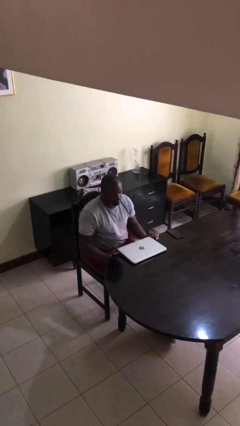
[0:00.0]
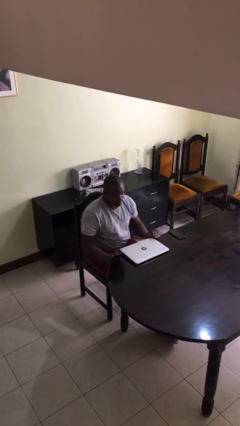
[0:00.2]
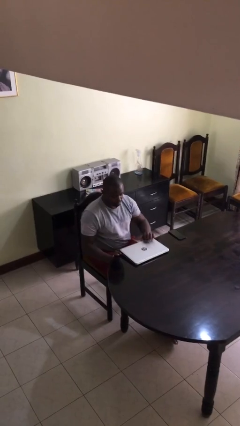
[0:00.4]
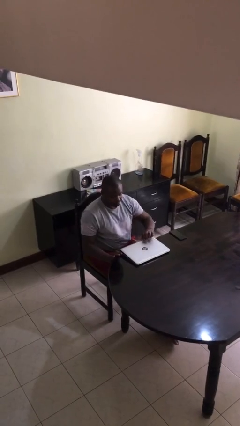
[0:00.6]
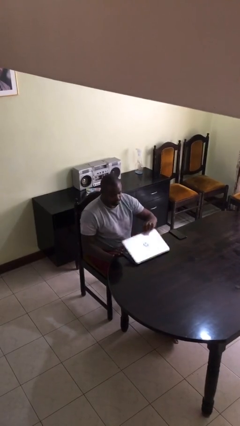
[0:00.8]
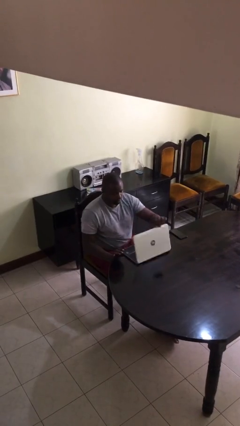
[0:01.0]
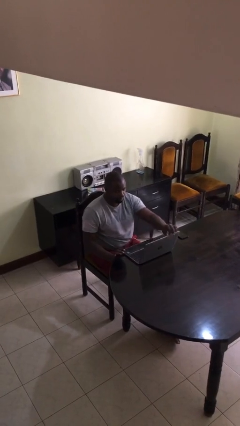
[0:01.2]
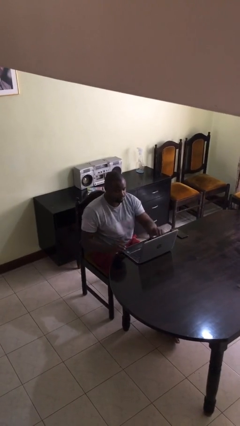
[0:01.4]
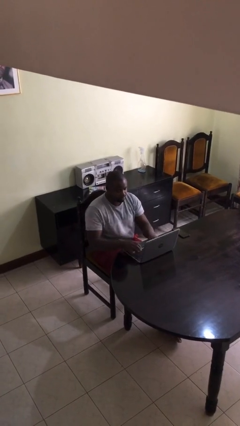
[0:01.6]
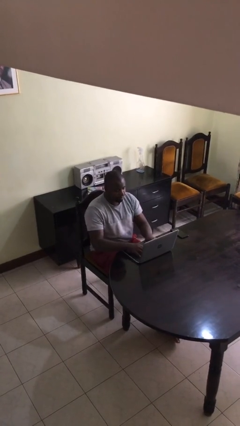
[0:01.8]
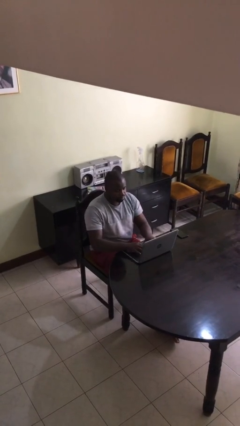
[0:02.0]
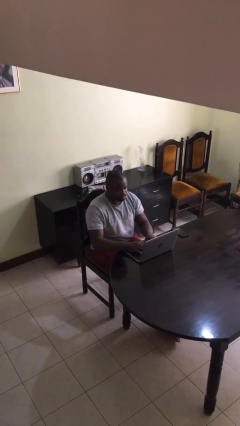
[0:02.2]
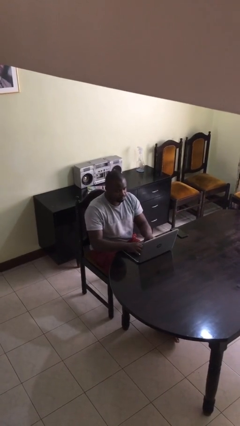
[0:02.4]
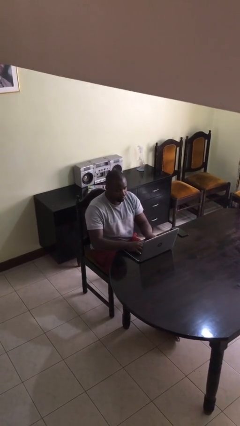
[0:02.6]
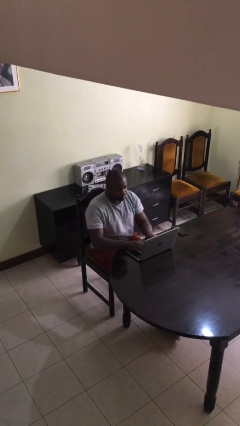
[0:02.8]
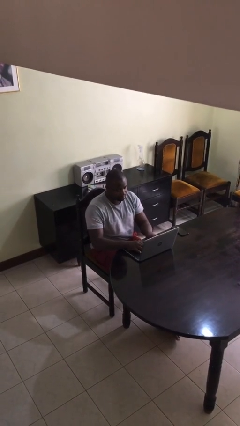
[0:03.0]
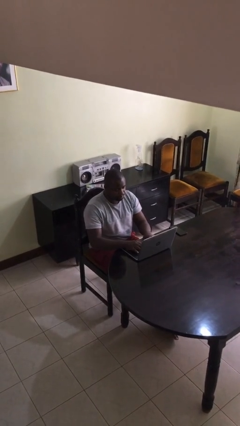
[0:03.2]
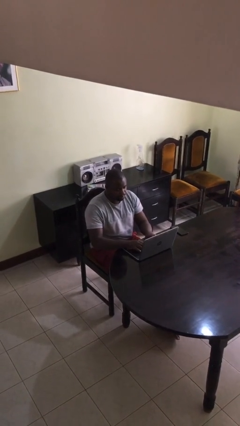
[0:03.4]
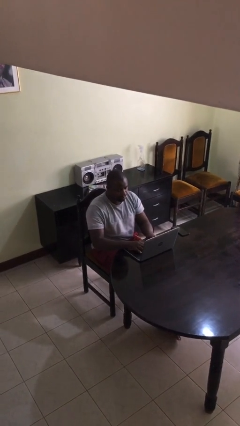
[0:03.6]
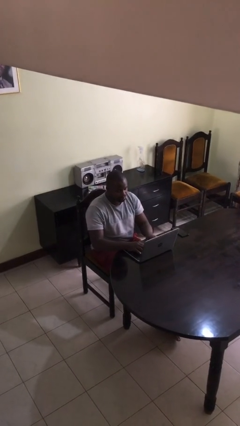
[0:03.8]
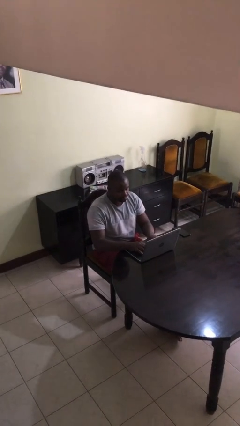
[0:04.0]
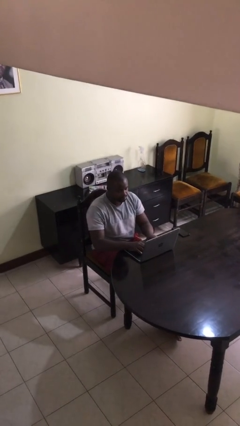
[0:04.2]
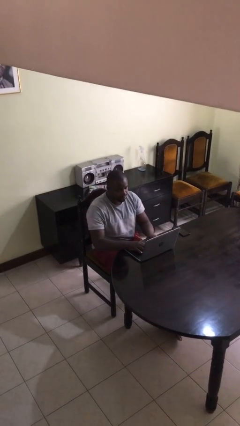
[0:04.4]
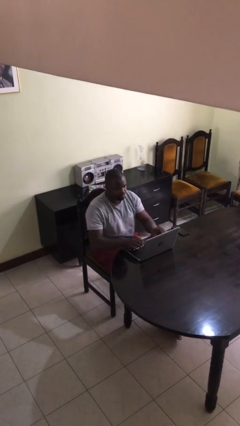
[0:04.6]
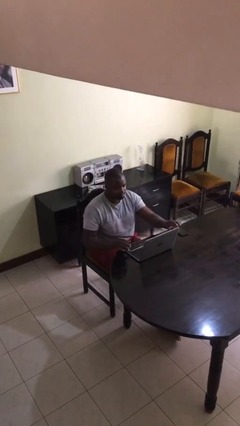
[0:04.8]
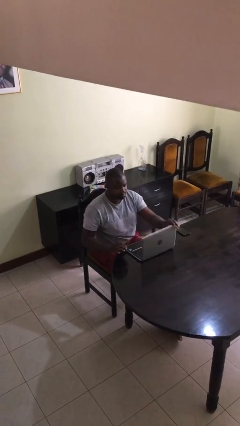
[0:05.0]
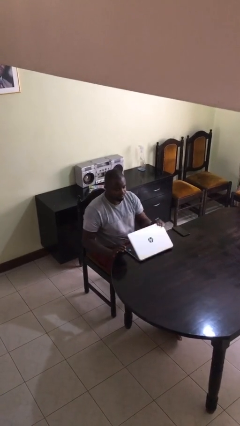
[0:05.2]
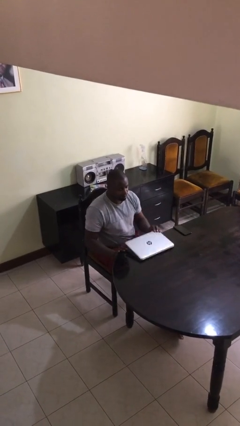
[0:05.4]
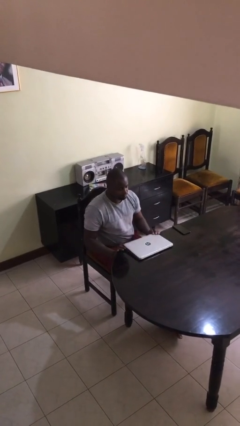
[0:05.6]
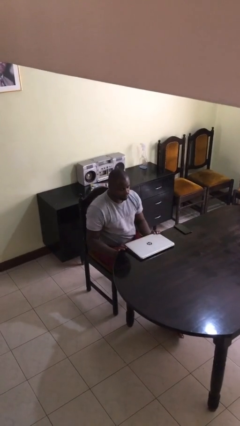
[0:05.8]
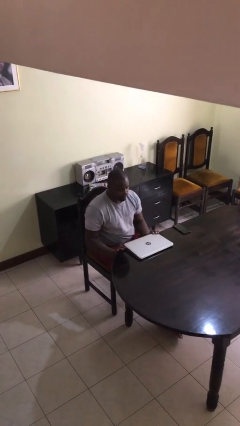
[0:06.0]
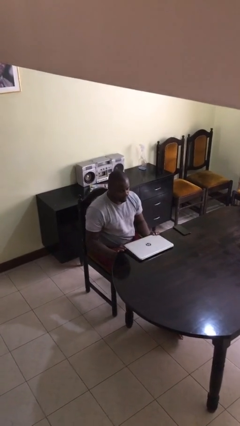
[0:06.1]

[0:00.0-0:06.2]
person interacts with laptop

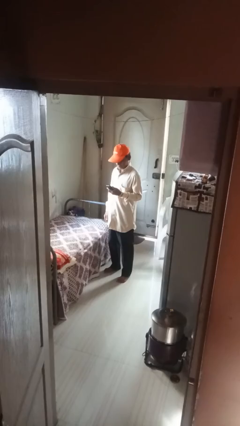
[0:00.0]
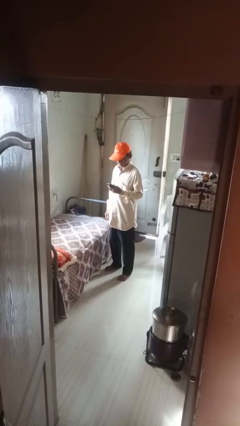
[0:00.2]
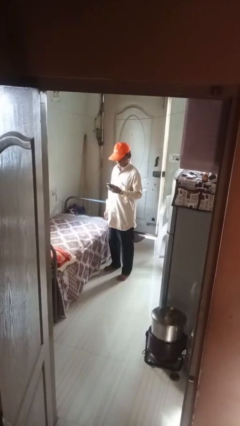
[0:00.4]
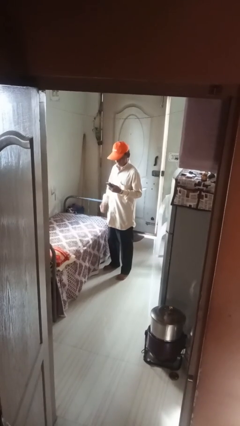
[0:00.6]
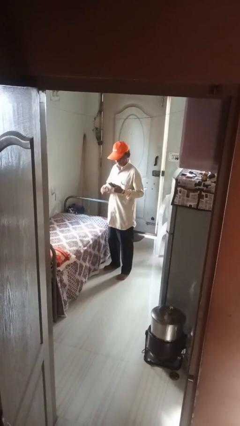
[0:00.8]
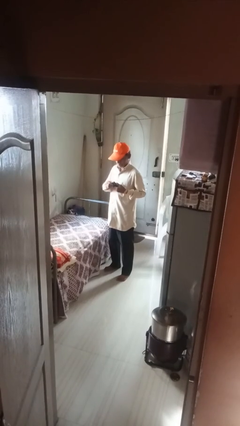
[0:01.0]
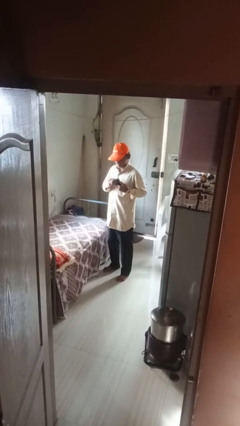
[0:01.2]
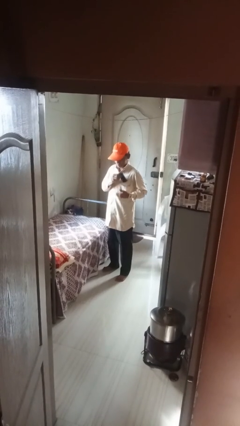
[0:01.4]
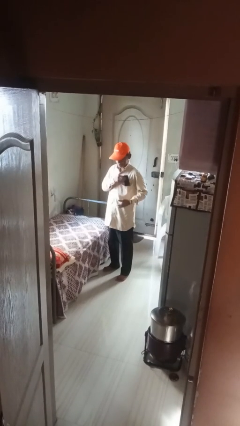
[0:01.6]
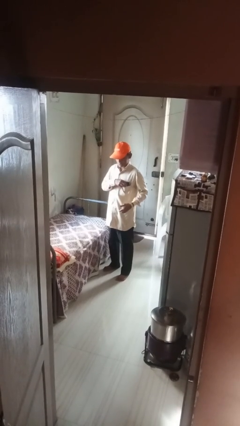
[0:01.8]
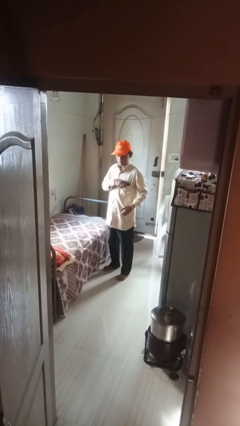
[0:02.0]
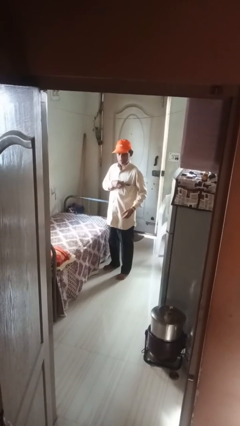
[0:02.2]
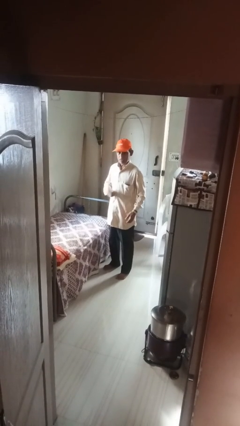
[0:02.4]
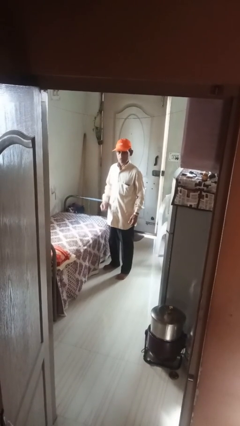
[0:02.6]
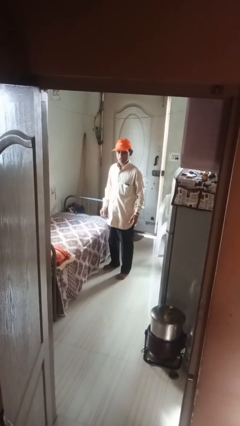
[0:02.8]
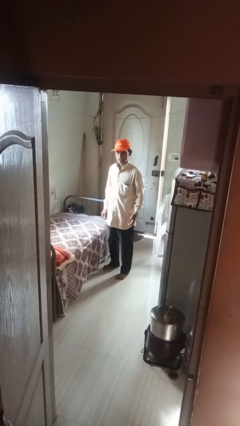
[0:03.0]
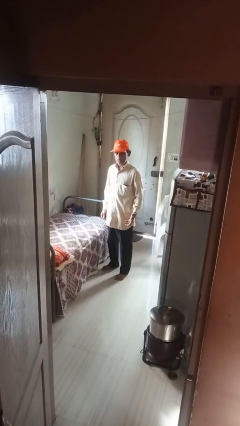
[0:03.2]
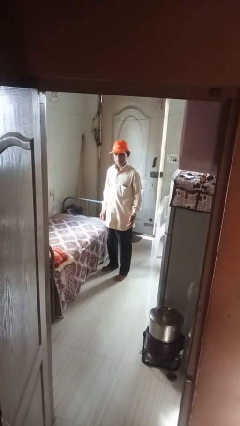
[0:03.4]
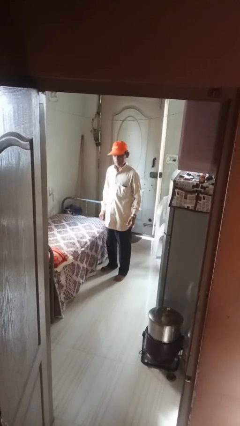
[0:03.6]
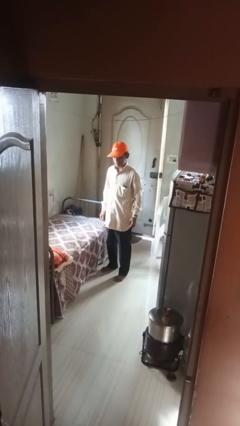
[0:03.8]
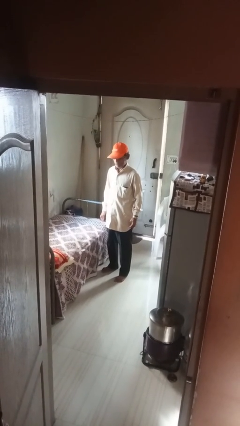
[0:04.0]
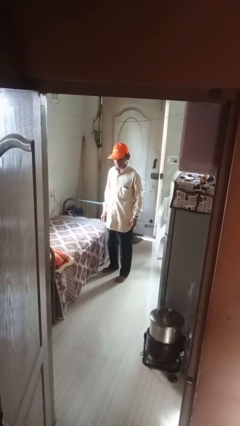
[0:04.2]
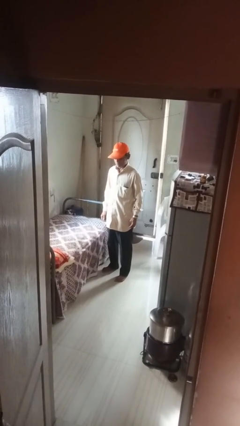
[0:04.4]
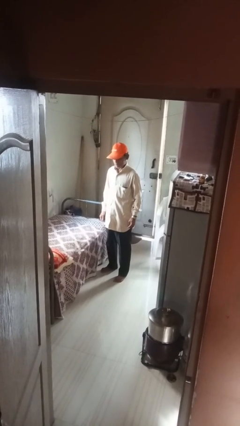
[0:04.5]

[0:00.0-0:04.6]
person puts phone into pocket

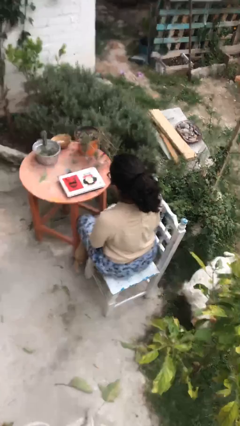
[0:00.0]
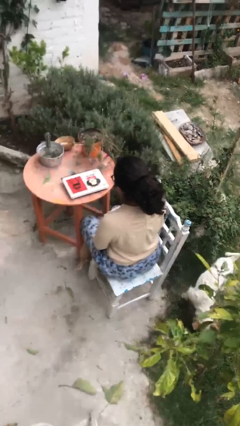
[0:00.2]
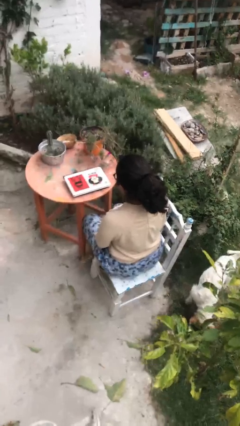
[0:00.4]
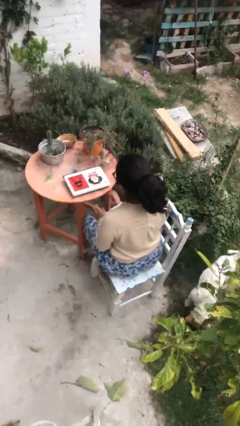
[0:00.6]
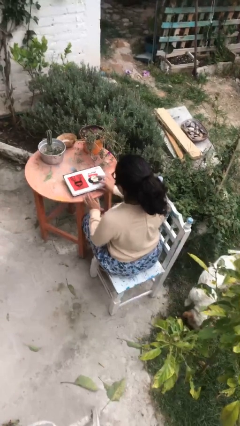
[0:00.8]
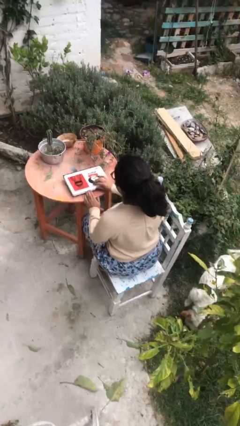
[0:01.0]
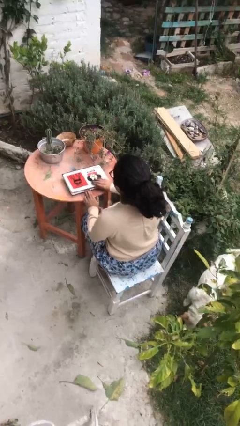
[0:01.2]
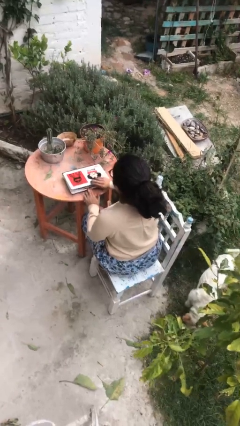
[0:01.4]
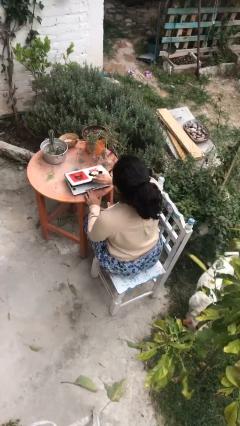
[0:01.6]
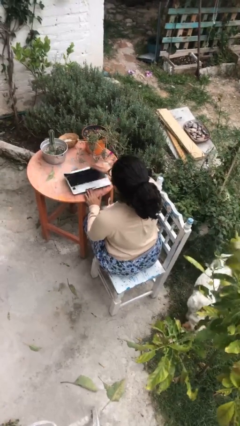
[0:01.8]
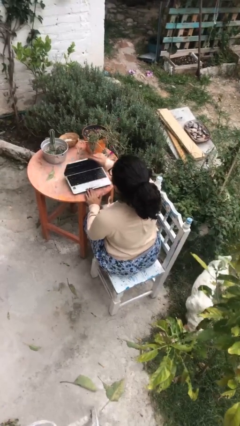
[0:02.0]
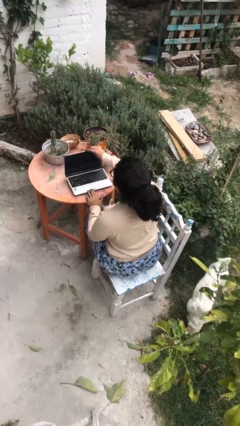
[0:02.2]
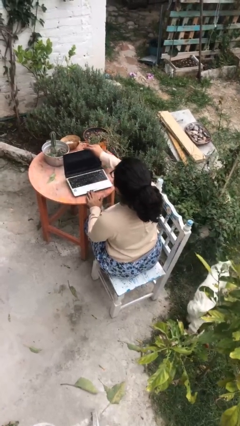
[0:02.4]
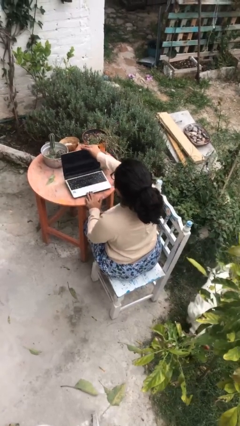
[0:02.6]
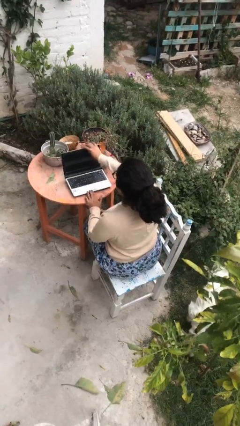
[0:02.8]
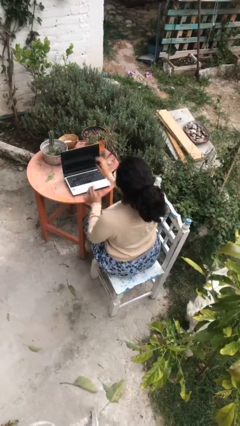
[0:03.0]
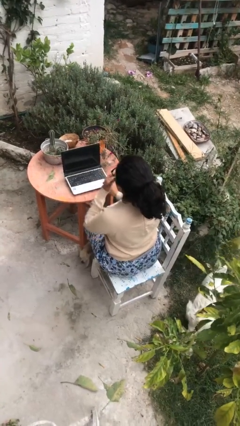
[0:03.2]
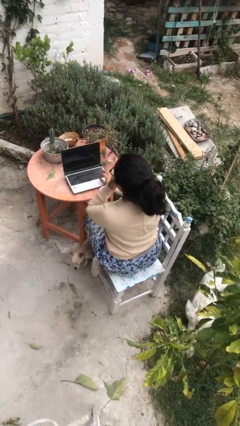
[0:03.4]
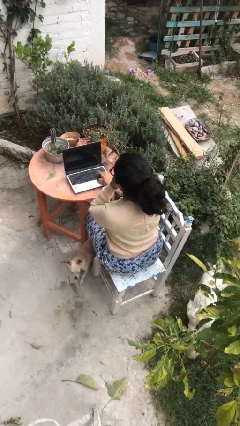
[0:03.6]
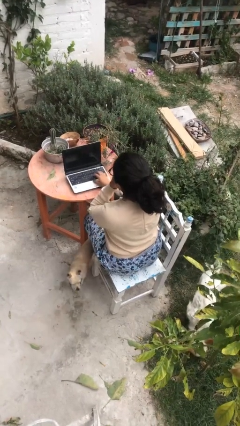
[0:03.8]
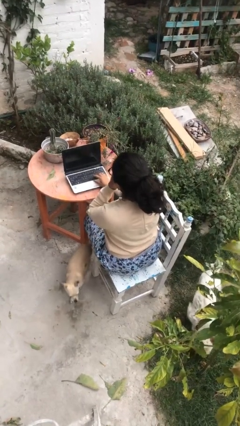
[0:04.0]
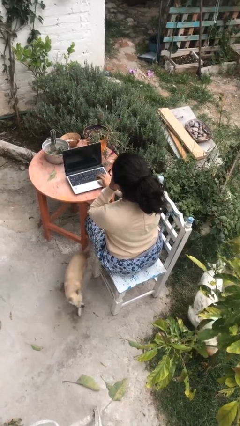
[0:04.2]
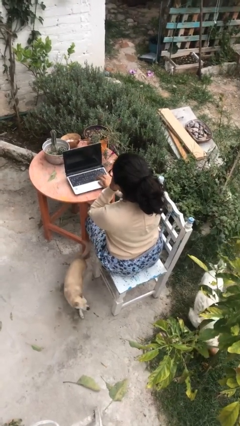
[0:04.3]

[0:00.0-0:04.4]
person opens laptop

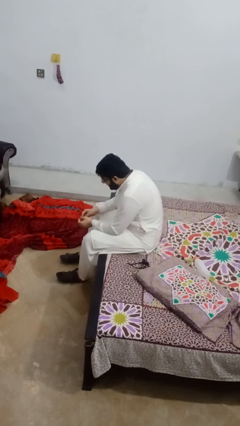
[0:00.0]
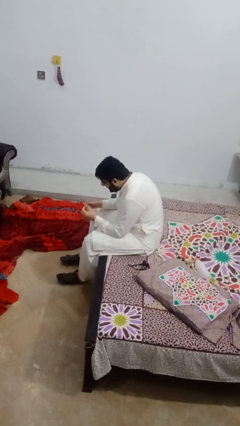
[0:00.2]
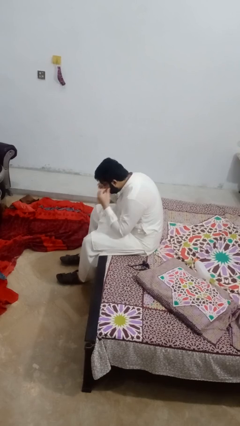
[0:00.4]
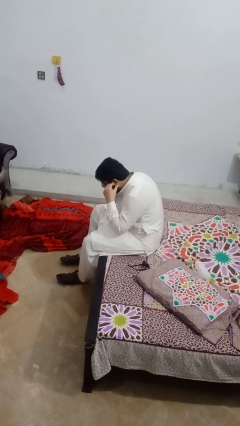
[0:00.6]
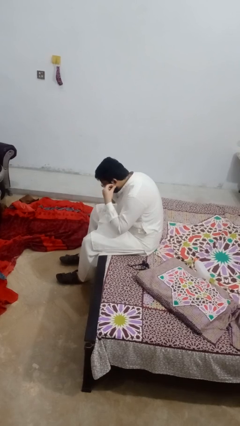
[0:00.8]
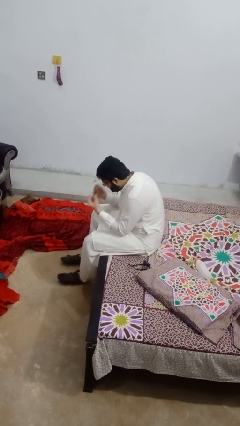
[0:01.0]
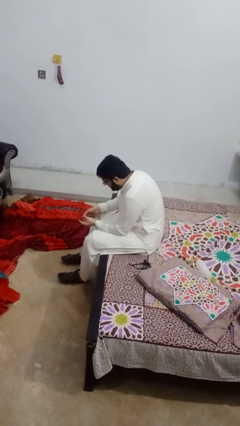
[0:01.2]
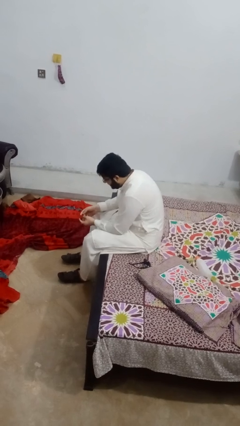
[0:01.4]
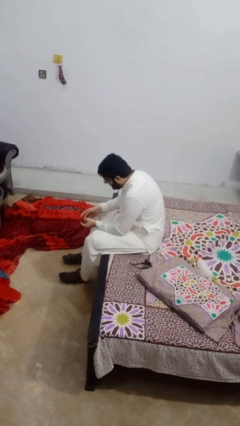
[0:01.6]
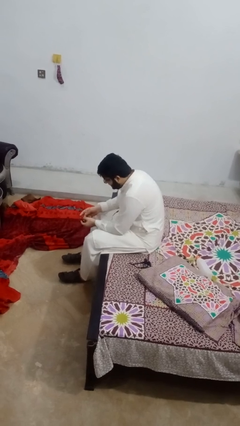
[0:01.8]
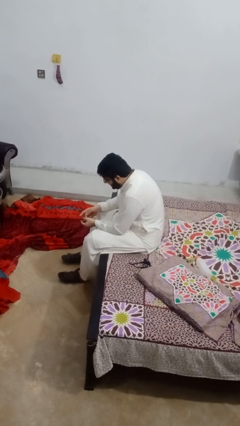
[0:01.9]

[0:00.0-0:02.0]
person takes off headphones

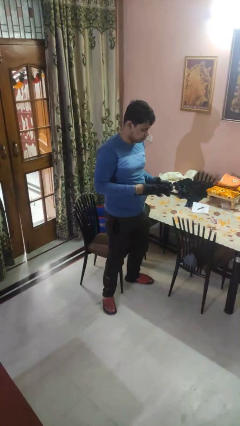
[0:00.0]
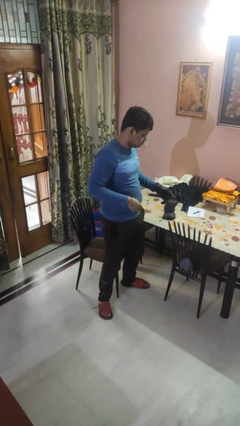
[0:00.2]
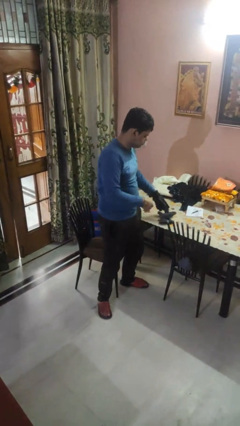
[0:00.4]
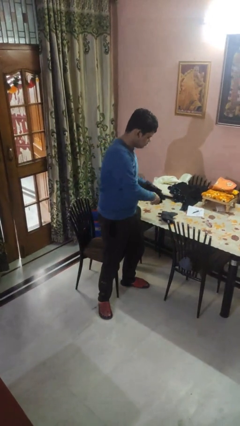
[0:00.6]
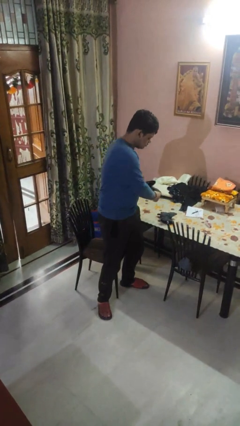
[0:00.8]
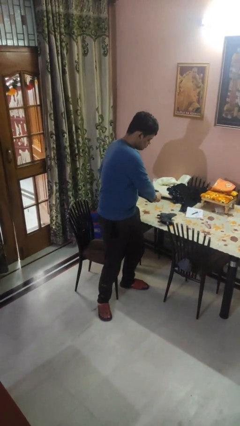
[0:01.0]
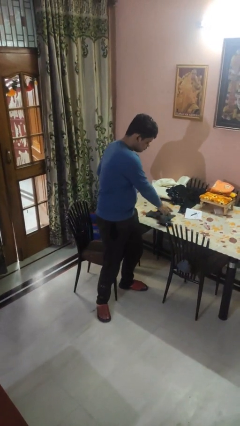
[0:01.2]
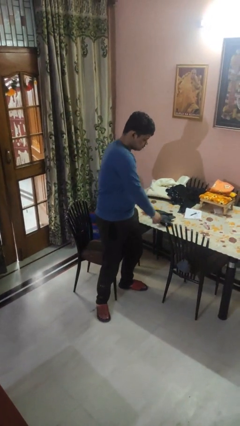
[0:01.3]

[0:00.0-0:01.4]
person takes off gloves
